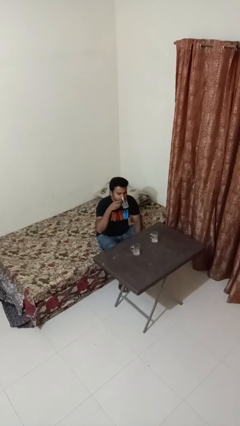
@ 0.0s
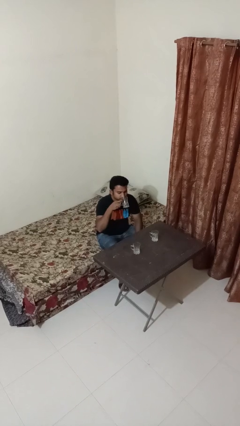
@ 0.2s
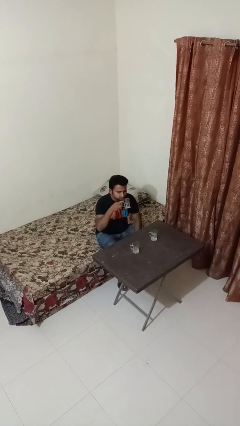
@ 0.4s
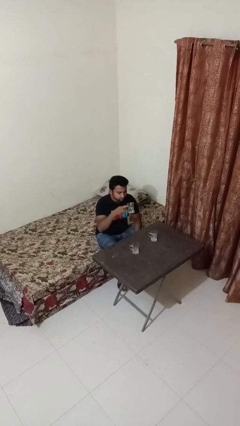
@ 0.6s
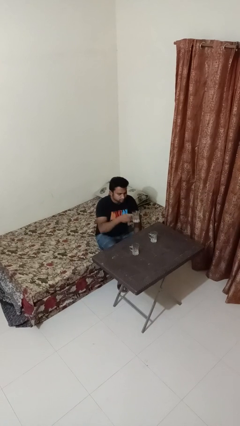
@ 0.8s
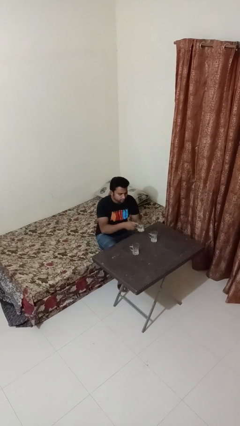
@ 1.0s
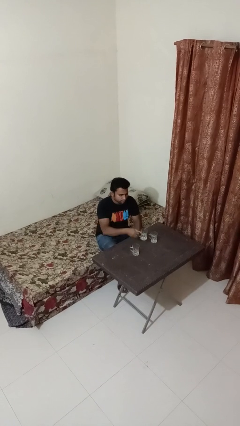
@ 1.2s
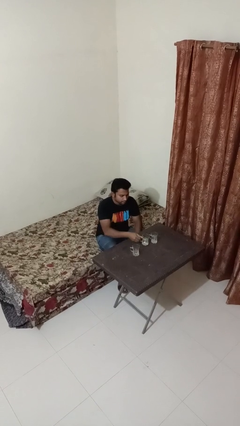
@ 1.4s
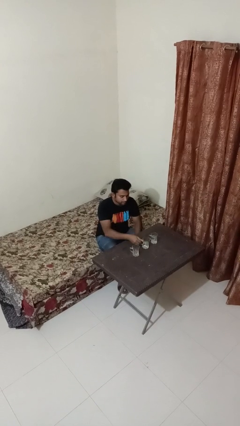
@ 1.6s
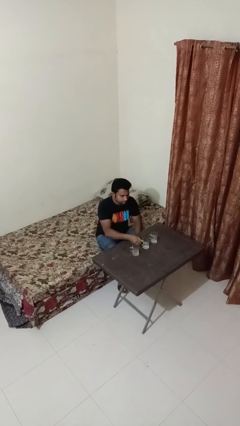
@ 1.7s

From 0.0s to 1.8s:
person puts down object on table

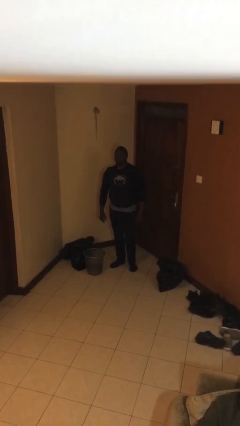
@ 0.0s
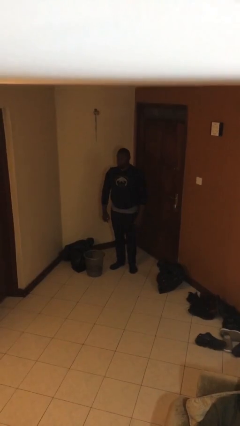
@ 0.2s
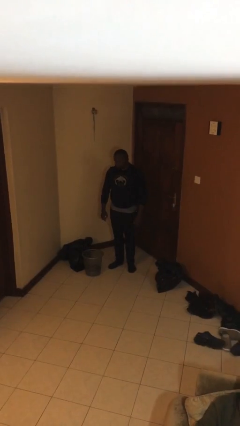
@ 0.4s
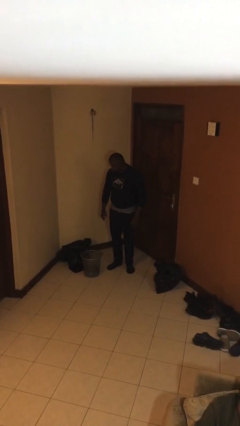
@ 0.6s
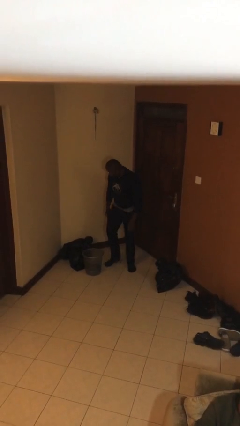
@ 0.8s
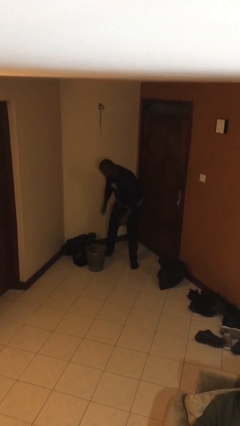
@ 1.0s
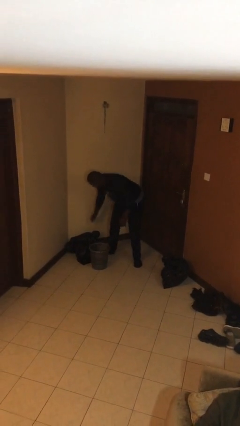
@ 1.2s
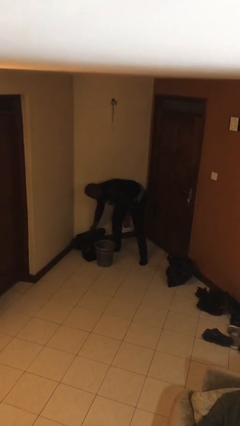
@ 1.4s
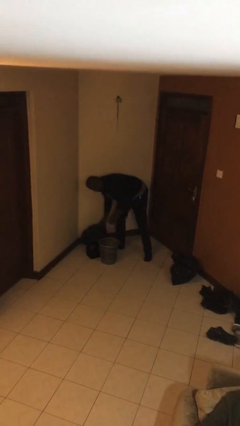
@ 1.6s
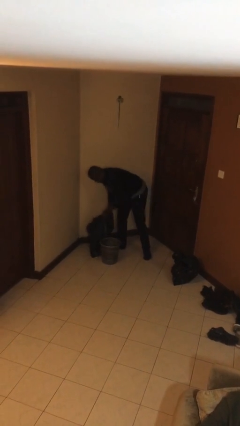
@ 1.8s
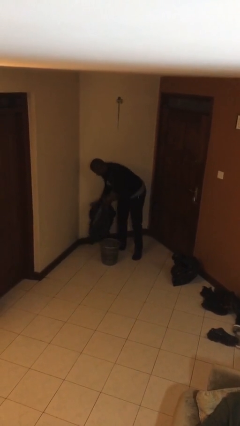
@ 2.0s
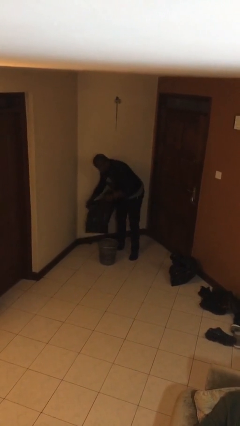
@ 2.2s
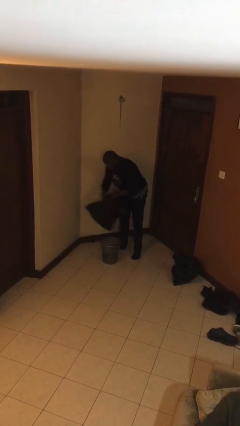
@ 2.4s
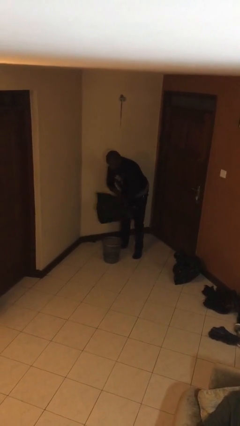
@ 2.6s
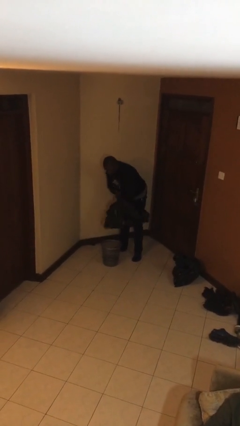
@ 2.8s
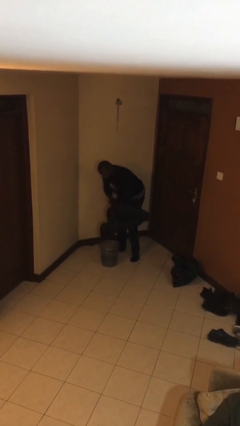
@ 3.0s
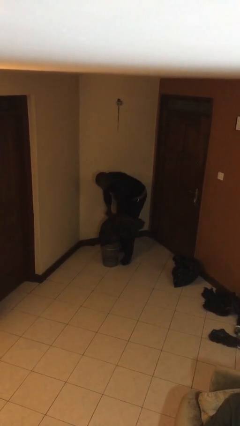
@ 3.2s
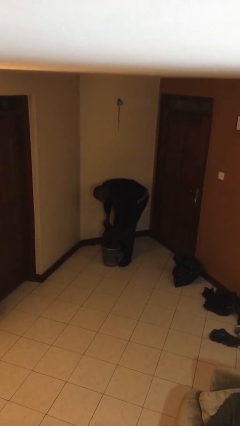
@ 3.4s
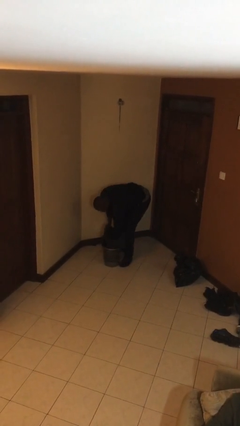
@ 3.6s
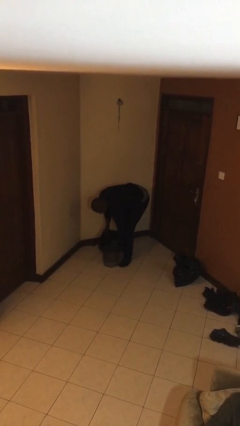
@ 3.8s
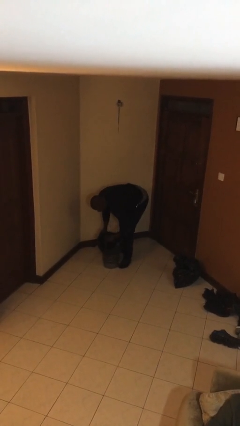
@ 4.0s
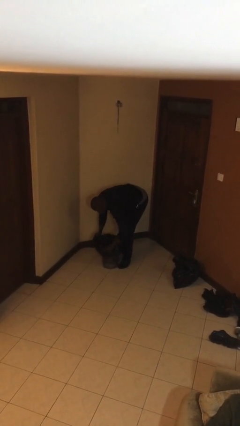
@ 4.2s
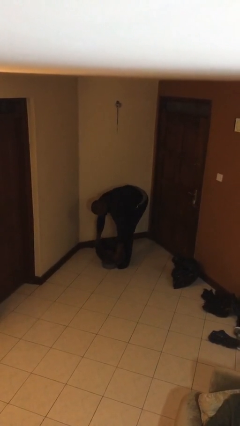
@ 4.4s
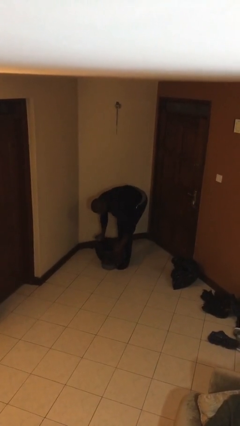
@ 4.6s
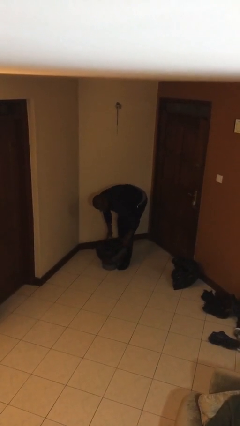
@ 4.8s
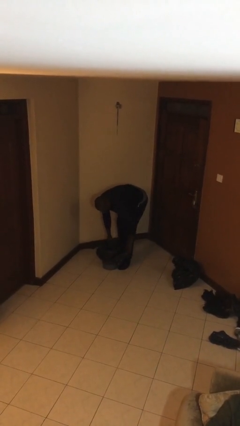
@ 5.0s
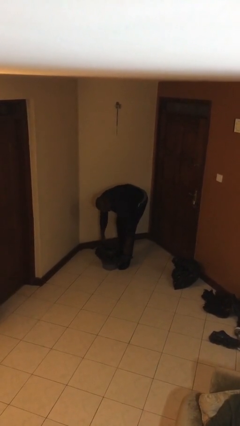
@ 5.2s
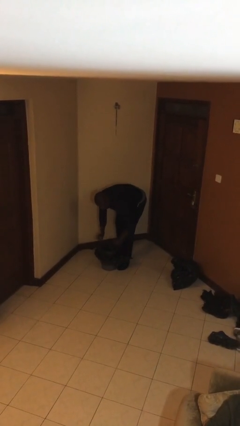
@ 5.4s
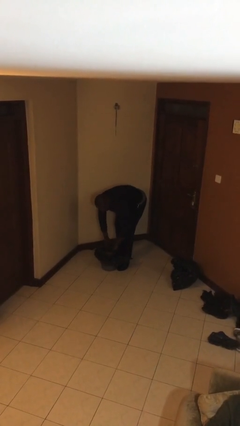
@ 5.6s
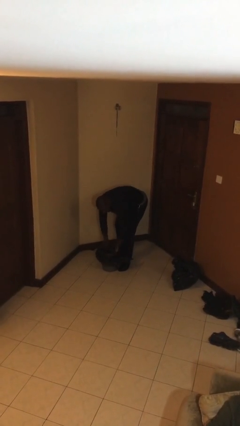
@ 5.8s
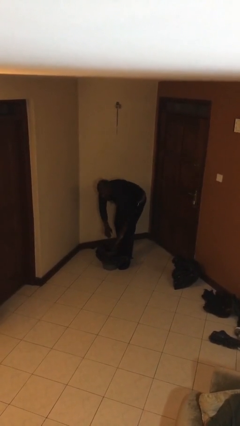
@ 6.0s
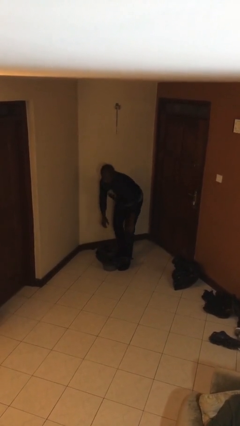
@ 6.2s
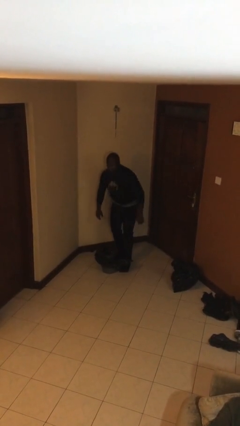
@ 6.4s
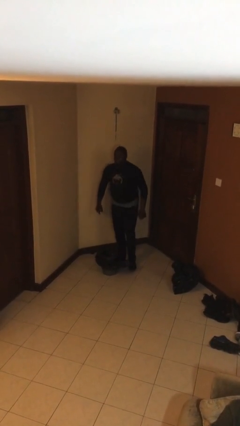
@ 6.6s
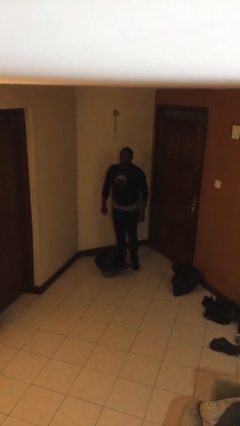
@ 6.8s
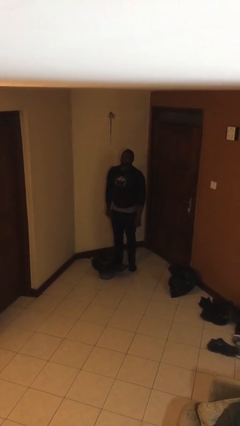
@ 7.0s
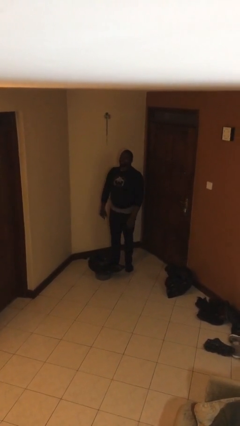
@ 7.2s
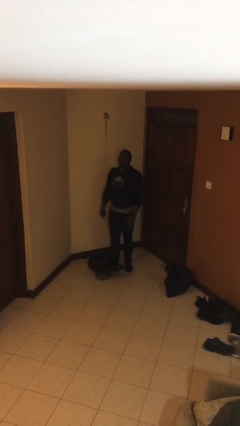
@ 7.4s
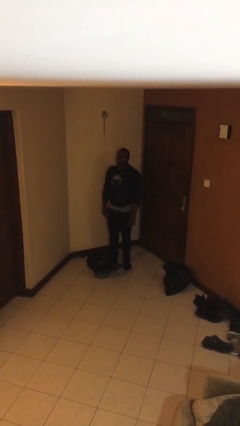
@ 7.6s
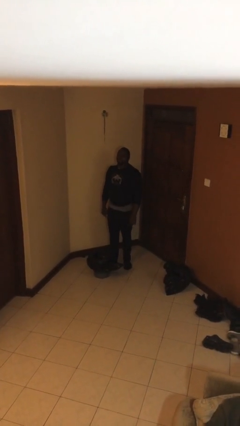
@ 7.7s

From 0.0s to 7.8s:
person inserts trashbag into trashcan

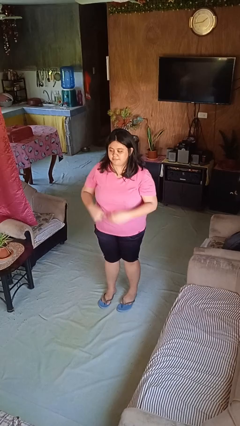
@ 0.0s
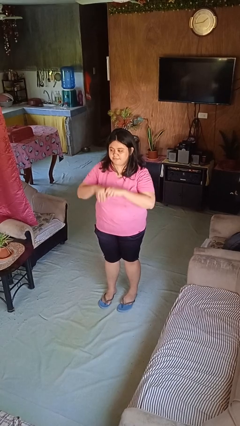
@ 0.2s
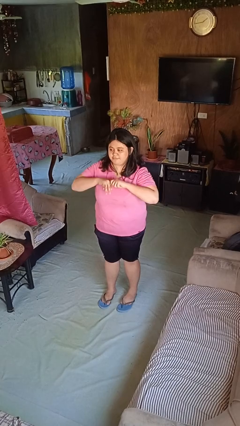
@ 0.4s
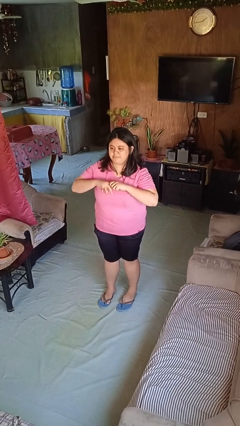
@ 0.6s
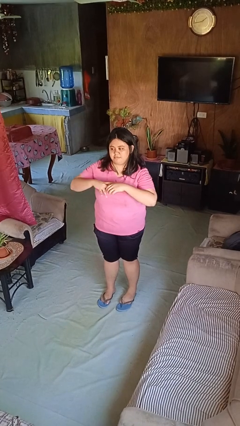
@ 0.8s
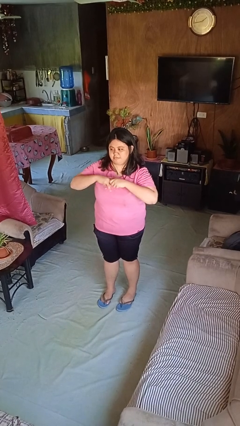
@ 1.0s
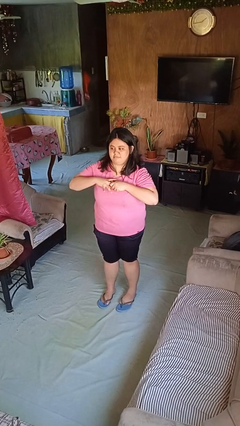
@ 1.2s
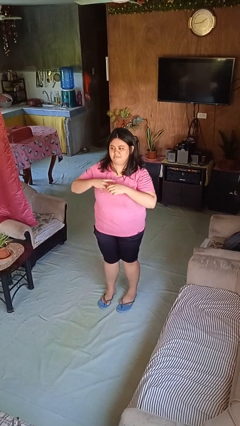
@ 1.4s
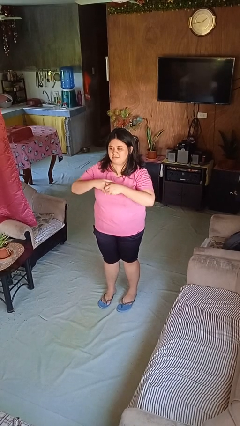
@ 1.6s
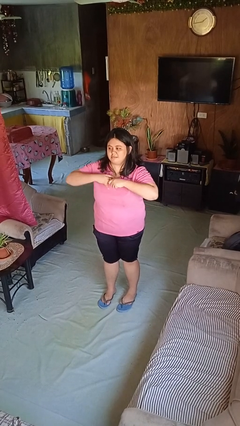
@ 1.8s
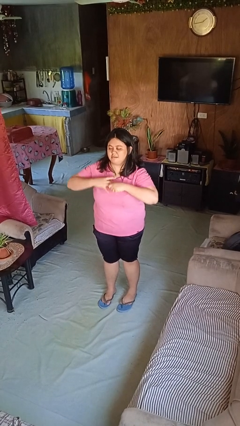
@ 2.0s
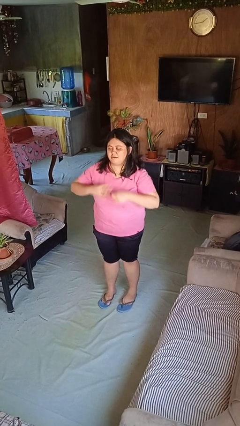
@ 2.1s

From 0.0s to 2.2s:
person cracks knuckles

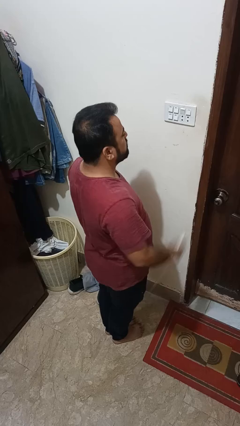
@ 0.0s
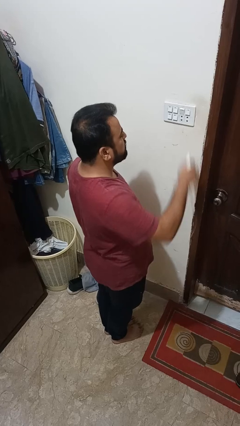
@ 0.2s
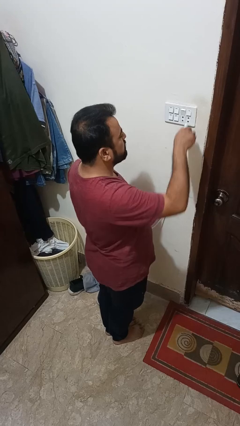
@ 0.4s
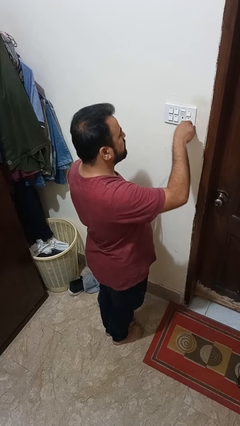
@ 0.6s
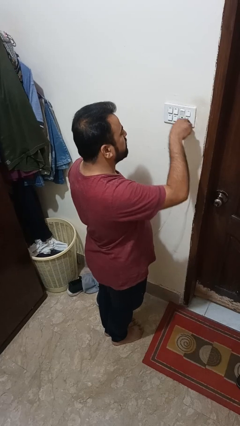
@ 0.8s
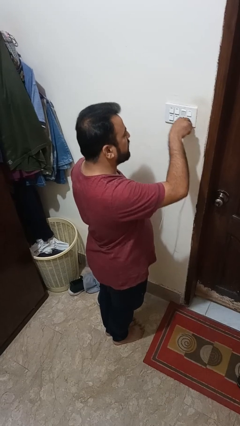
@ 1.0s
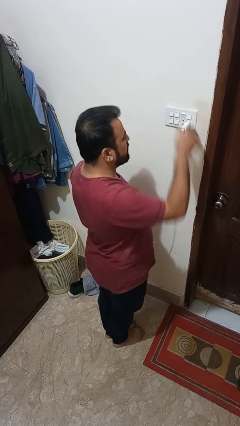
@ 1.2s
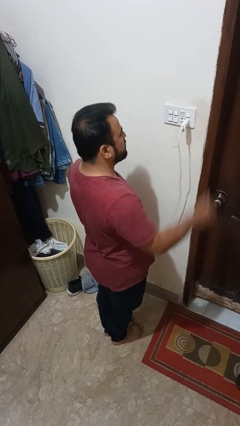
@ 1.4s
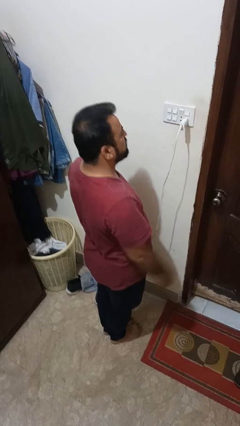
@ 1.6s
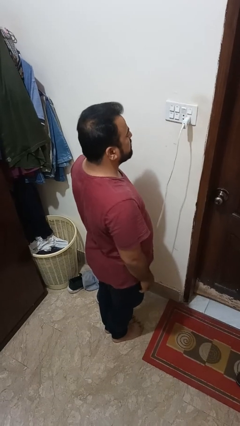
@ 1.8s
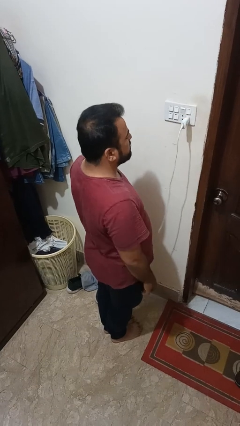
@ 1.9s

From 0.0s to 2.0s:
person plugs into electrical socket

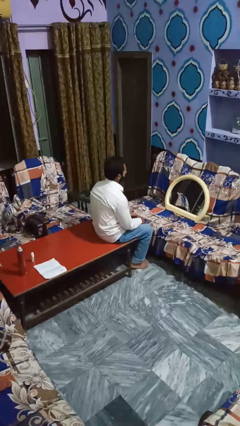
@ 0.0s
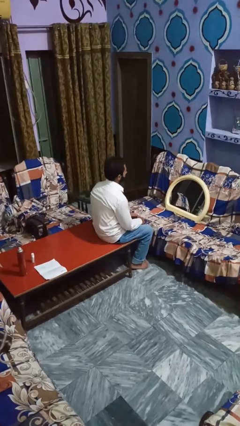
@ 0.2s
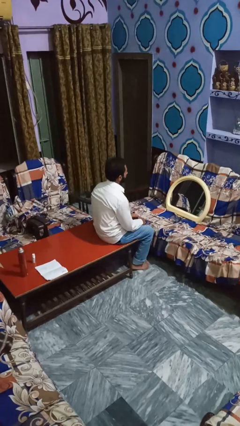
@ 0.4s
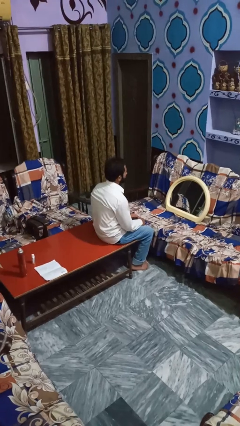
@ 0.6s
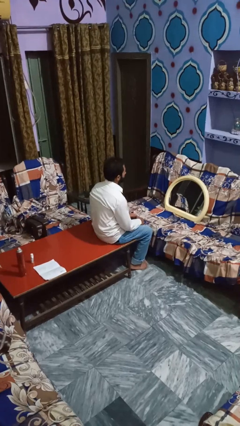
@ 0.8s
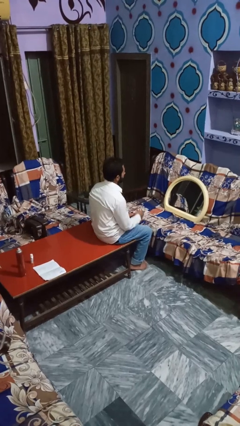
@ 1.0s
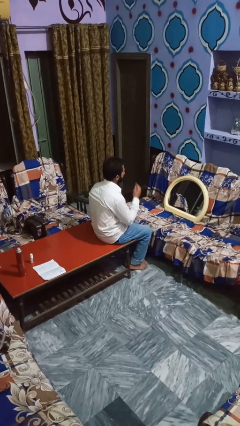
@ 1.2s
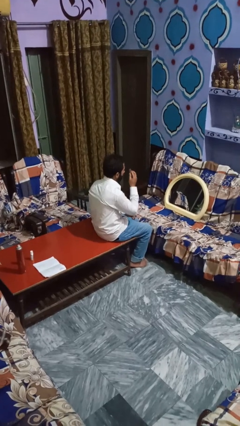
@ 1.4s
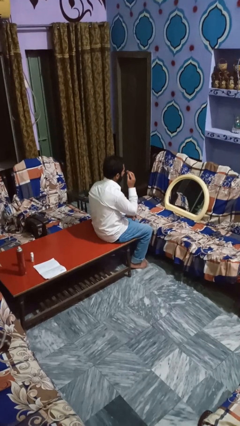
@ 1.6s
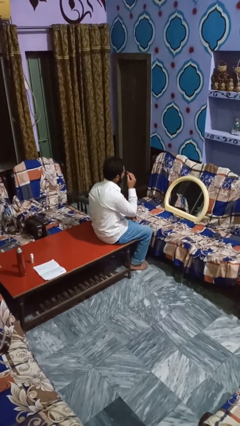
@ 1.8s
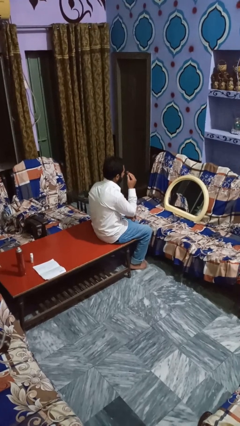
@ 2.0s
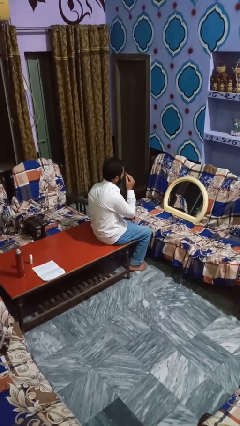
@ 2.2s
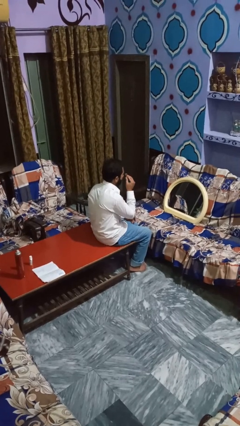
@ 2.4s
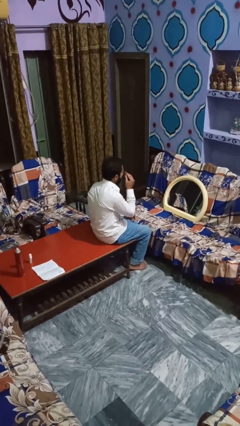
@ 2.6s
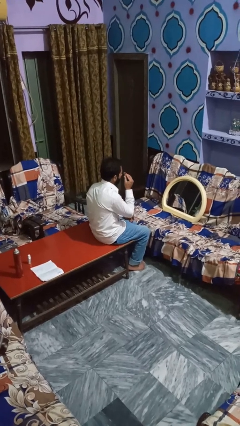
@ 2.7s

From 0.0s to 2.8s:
person applies eye makeup

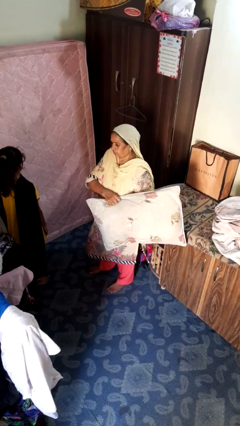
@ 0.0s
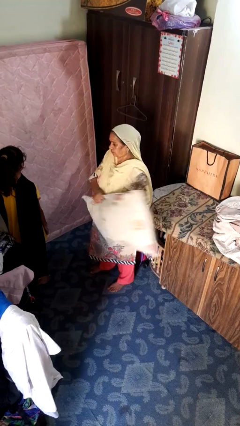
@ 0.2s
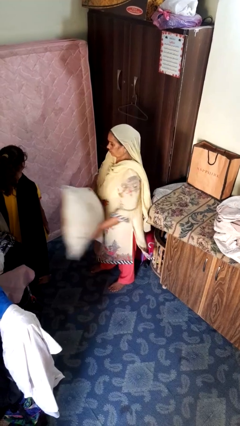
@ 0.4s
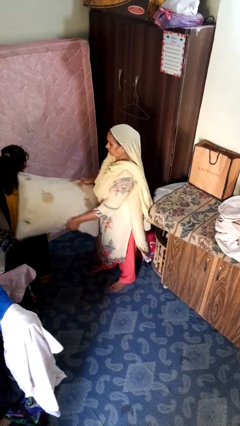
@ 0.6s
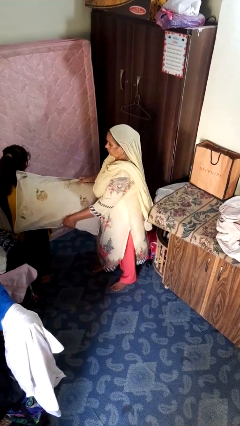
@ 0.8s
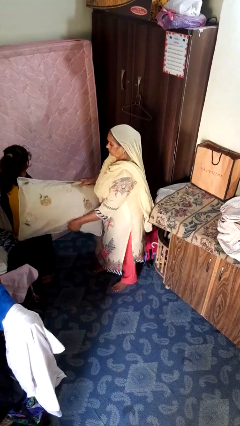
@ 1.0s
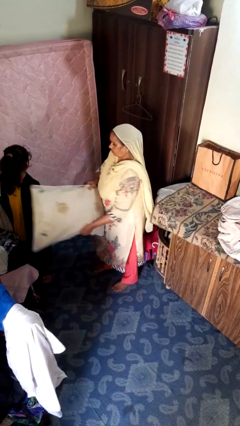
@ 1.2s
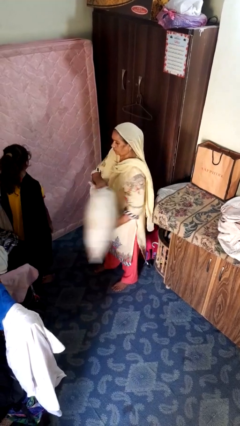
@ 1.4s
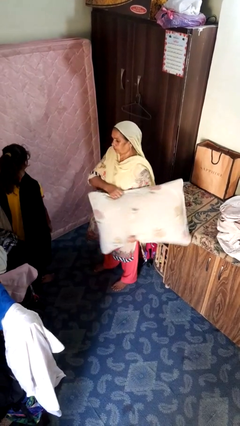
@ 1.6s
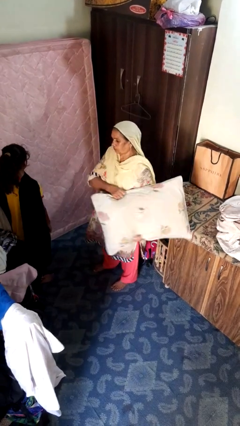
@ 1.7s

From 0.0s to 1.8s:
person hits person with pillow
